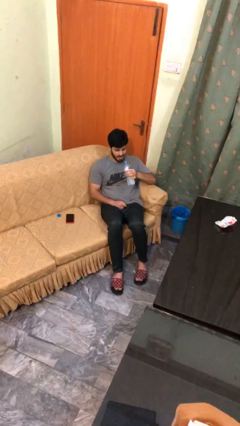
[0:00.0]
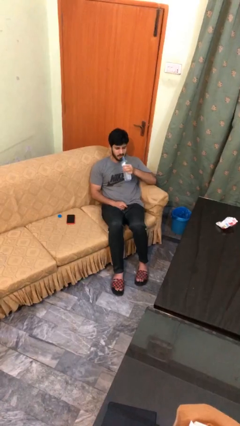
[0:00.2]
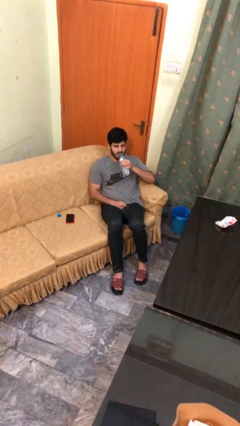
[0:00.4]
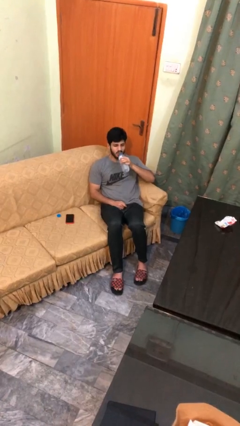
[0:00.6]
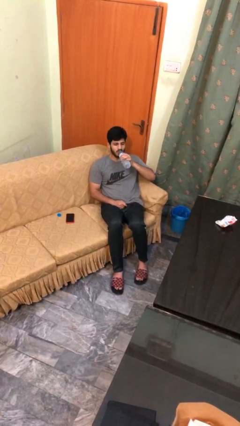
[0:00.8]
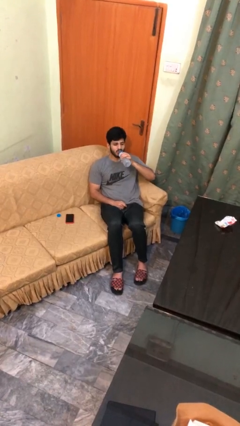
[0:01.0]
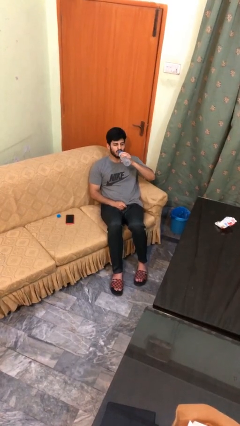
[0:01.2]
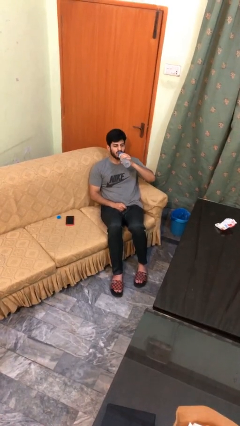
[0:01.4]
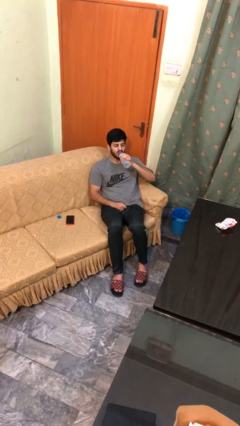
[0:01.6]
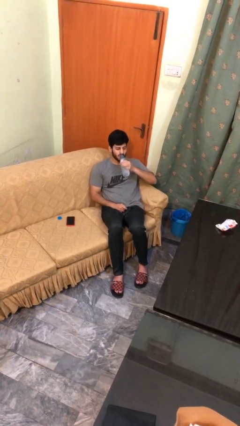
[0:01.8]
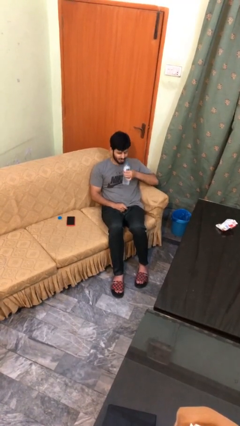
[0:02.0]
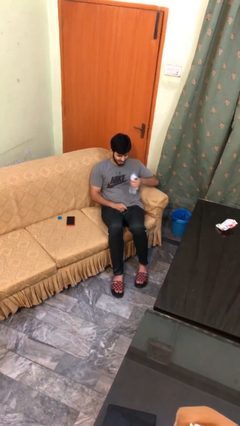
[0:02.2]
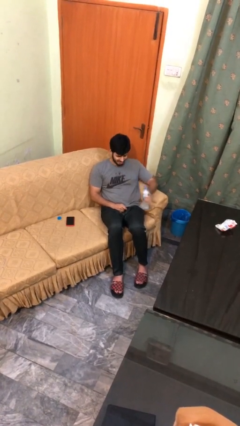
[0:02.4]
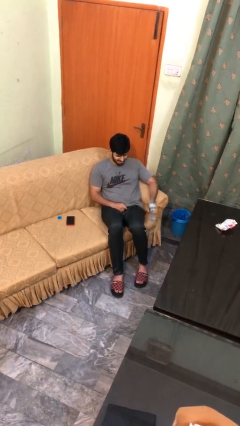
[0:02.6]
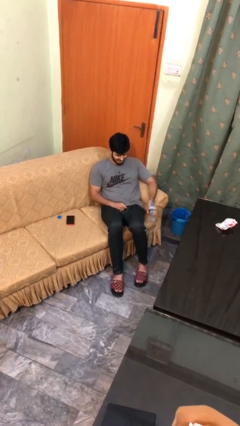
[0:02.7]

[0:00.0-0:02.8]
person drinks from bottle

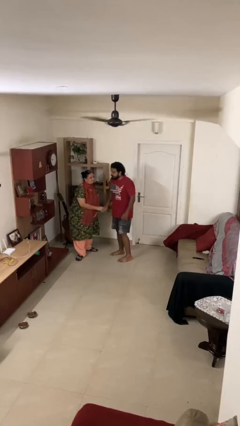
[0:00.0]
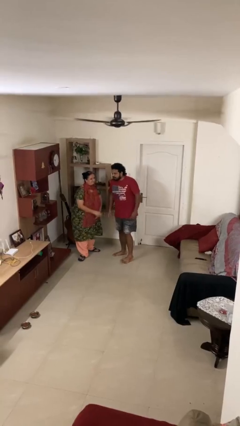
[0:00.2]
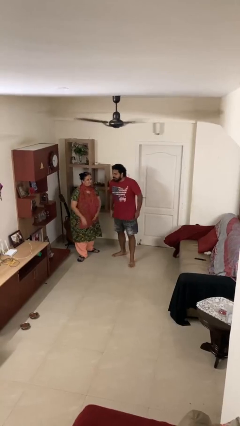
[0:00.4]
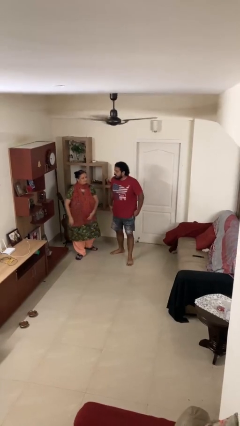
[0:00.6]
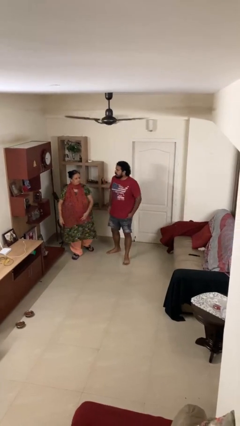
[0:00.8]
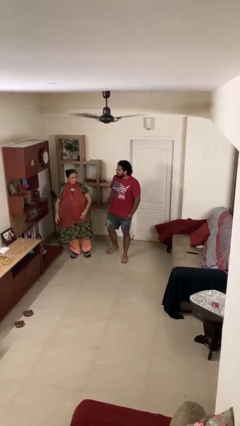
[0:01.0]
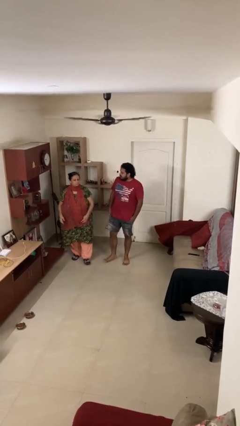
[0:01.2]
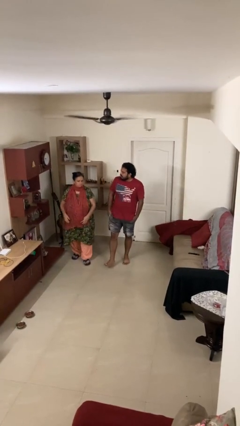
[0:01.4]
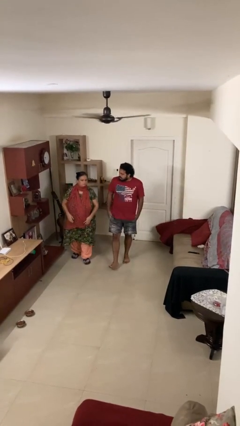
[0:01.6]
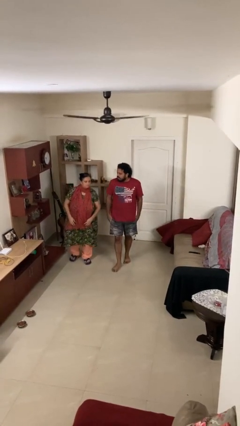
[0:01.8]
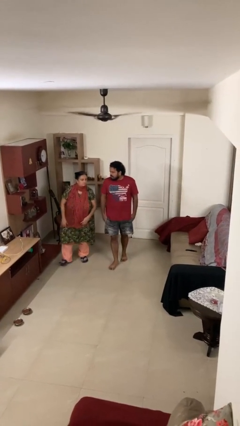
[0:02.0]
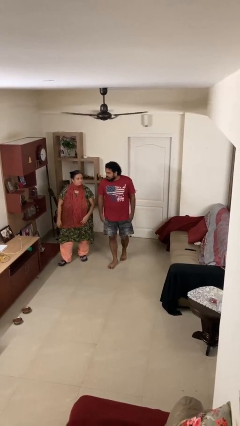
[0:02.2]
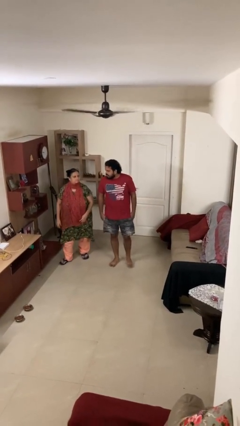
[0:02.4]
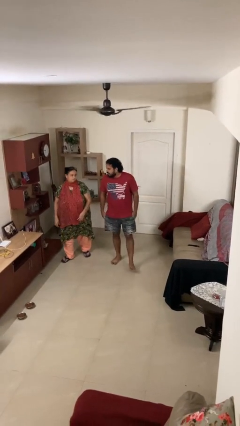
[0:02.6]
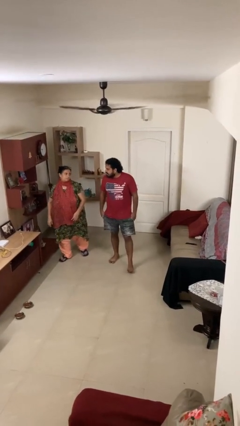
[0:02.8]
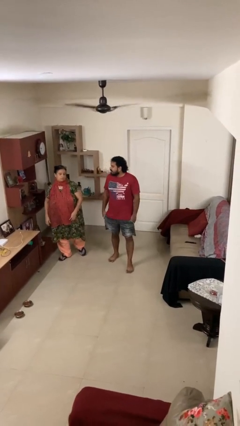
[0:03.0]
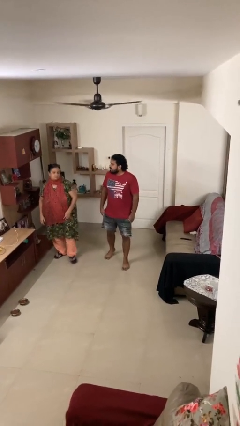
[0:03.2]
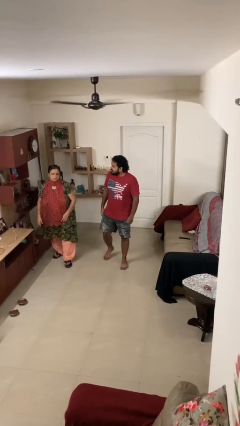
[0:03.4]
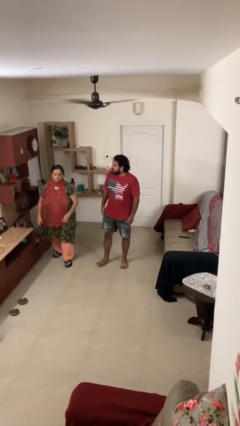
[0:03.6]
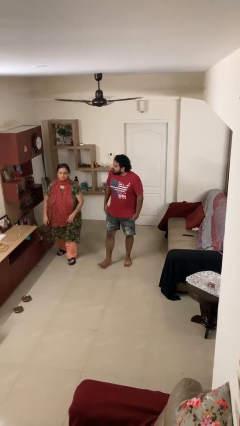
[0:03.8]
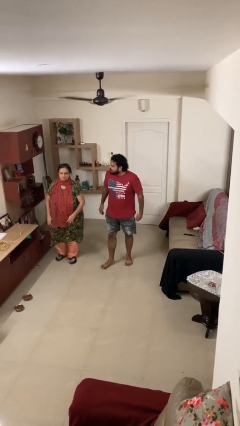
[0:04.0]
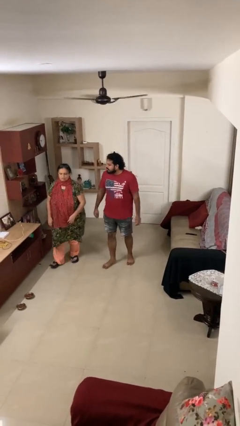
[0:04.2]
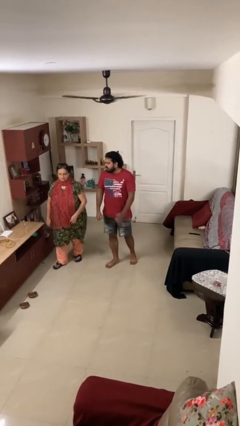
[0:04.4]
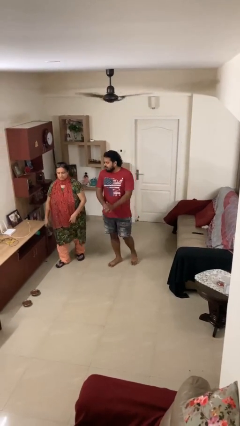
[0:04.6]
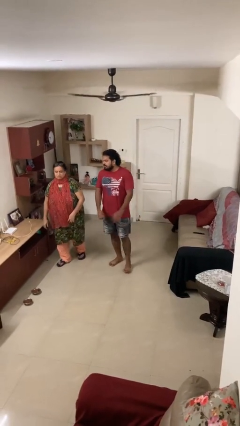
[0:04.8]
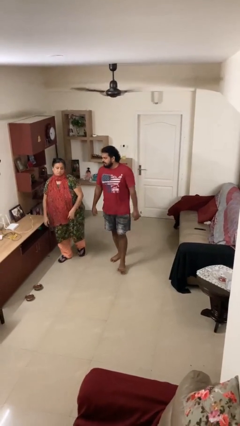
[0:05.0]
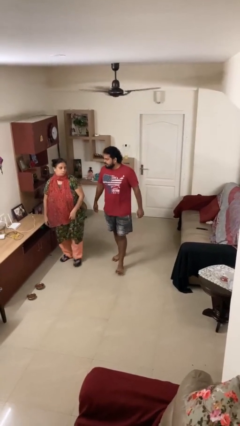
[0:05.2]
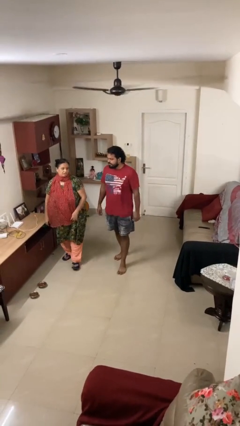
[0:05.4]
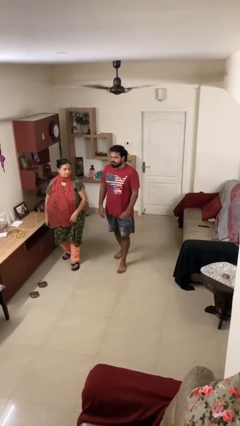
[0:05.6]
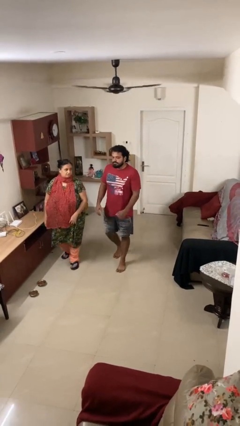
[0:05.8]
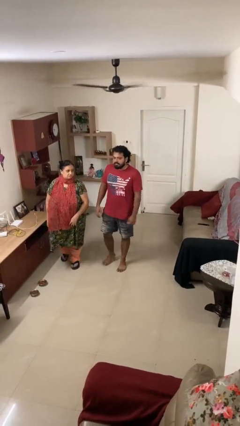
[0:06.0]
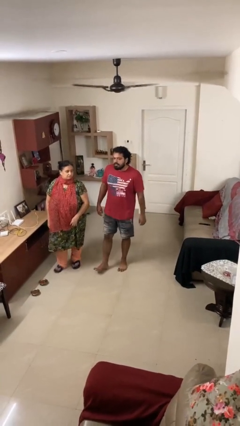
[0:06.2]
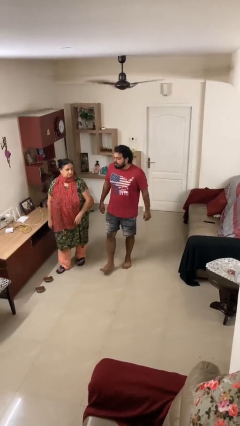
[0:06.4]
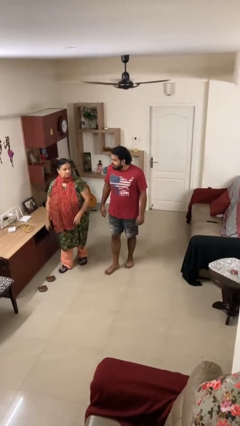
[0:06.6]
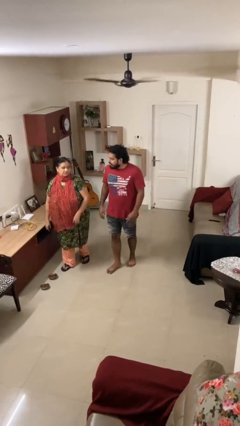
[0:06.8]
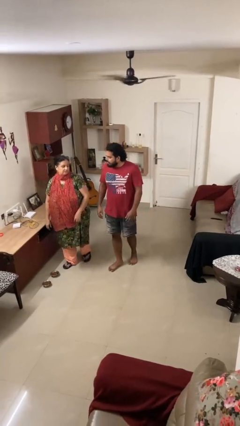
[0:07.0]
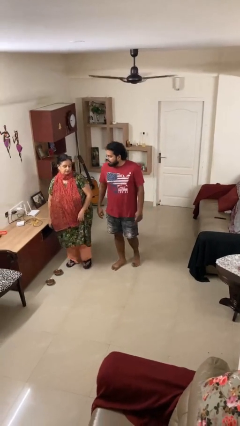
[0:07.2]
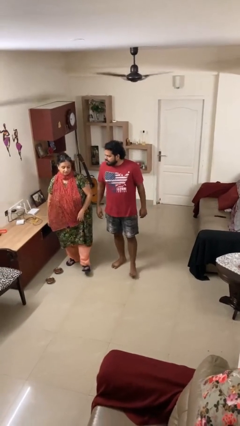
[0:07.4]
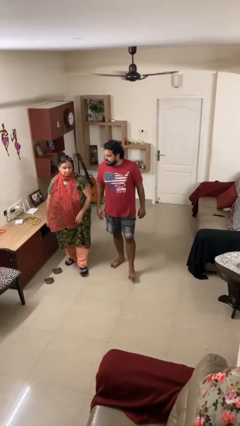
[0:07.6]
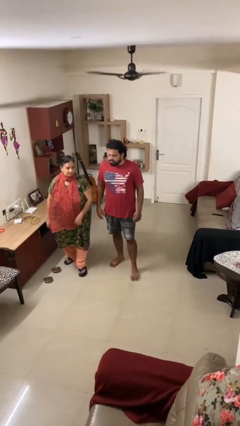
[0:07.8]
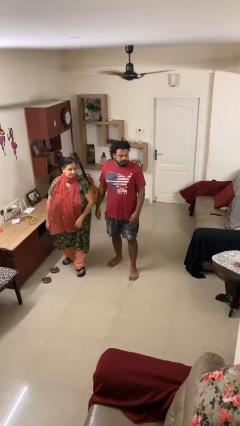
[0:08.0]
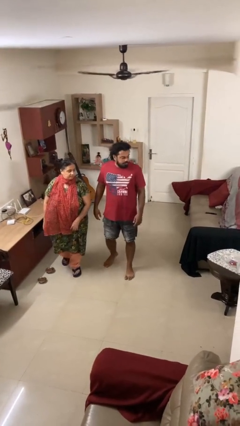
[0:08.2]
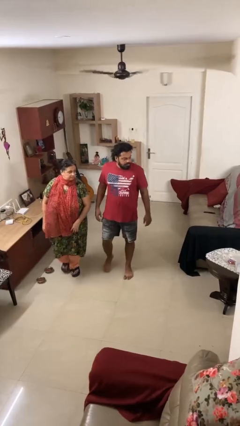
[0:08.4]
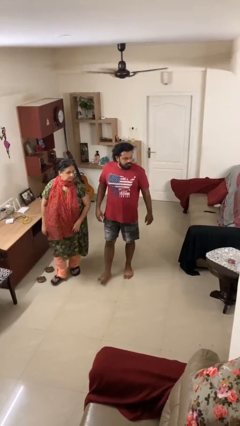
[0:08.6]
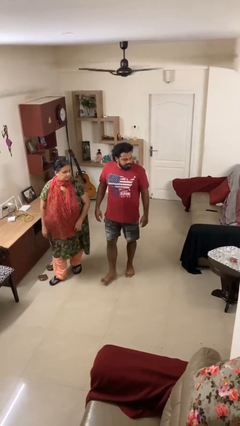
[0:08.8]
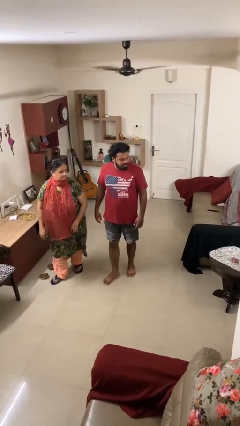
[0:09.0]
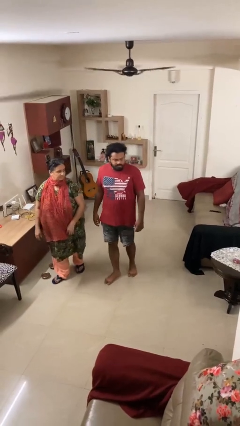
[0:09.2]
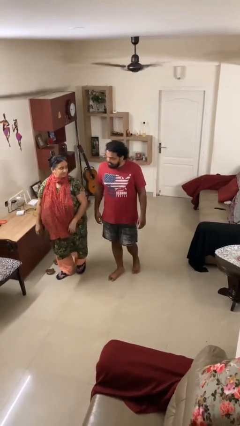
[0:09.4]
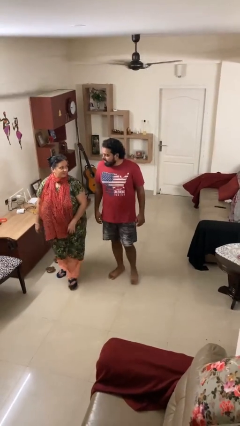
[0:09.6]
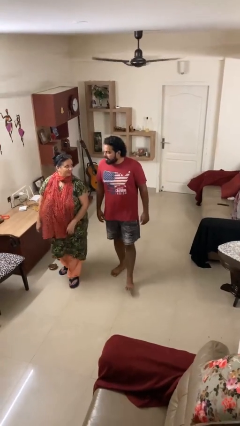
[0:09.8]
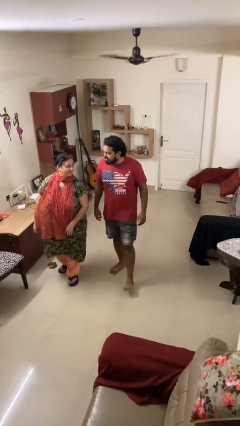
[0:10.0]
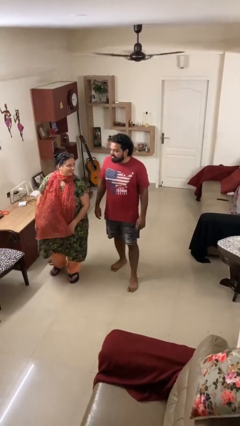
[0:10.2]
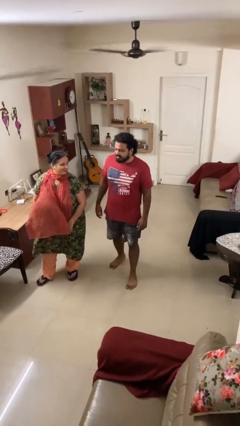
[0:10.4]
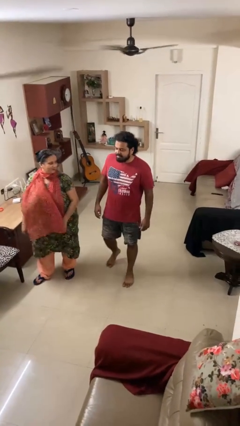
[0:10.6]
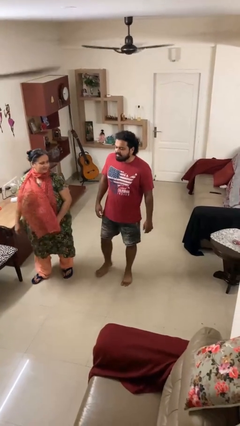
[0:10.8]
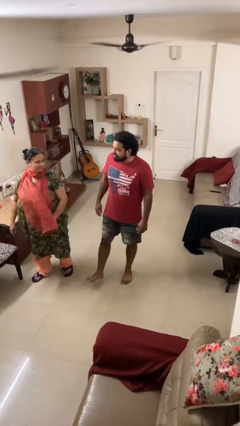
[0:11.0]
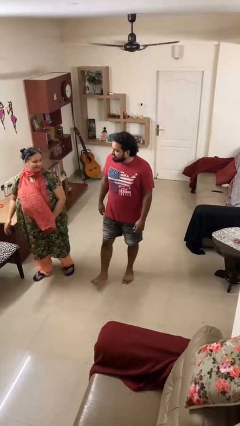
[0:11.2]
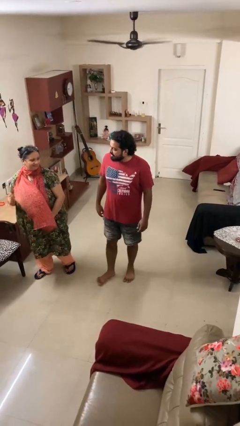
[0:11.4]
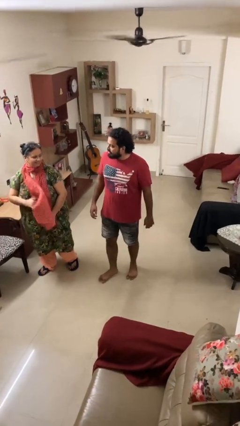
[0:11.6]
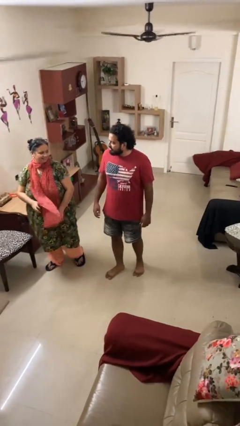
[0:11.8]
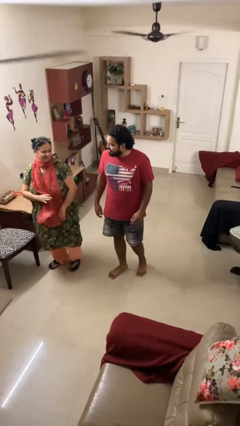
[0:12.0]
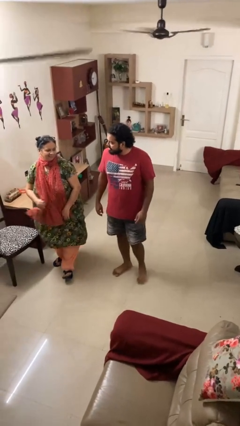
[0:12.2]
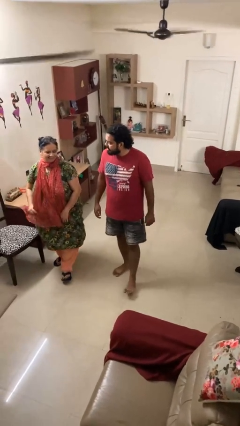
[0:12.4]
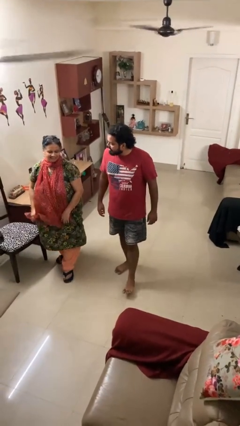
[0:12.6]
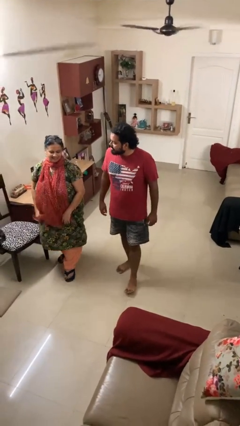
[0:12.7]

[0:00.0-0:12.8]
person talks to person

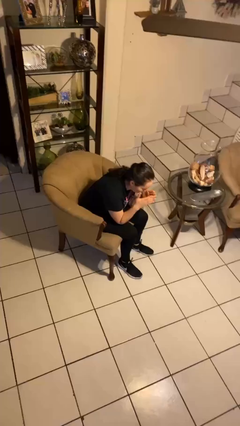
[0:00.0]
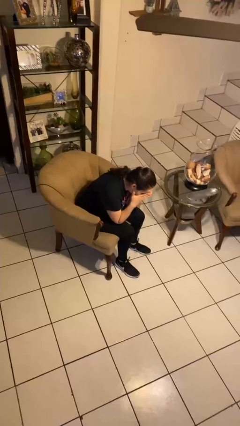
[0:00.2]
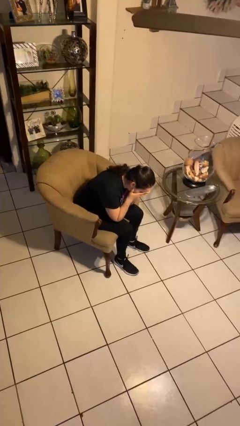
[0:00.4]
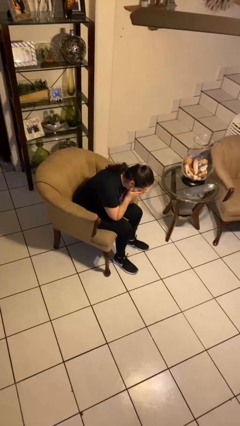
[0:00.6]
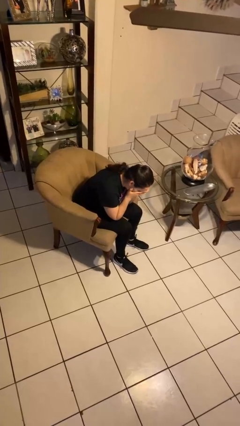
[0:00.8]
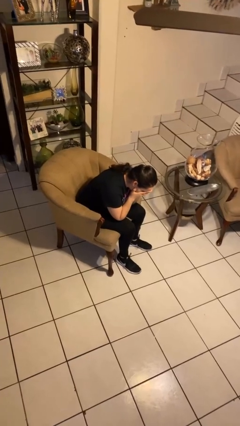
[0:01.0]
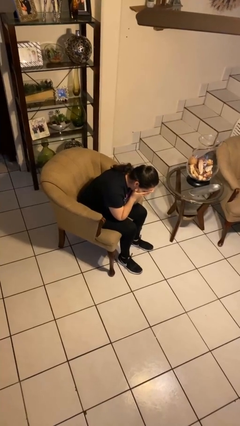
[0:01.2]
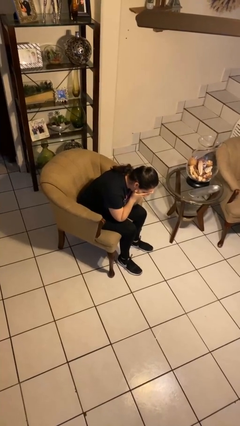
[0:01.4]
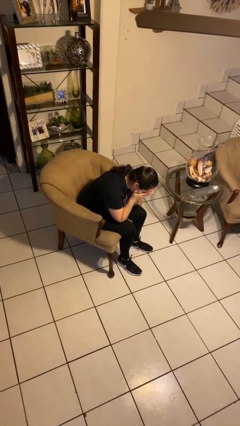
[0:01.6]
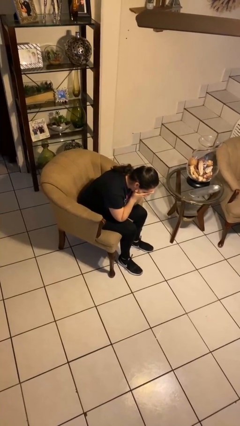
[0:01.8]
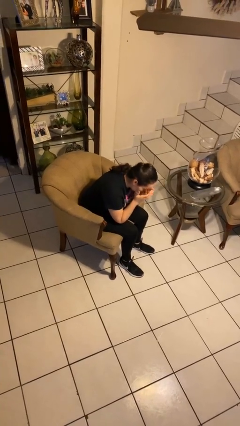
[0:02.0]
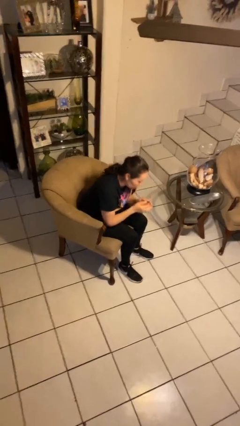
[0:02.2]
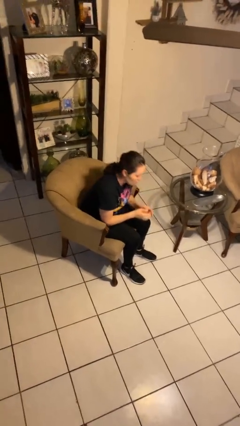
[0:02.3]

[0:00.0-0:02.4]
person prays
